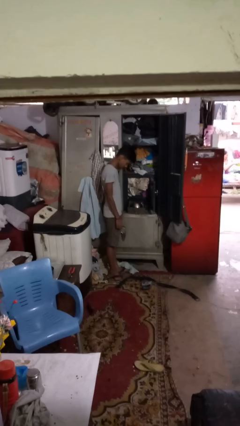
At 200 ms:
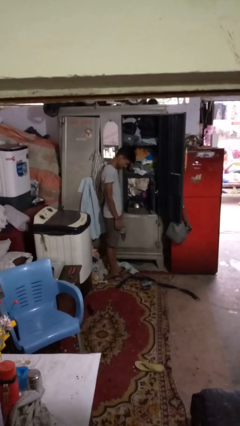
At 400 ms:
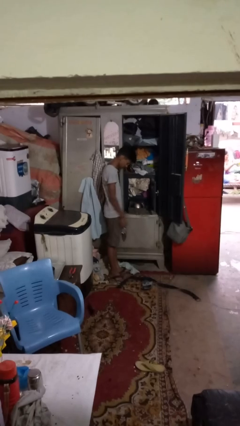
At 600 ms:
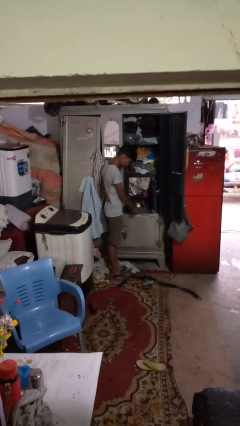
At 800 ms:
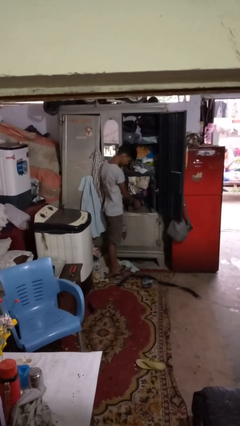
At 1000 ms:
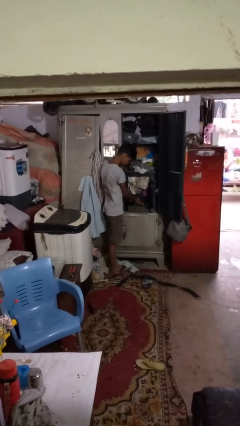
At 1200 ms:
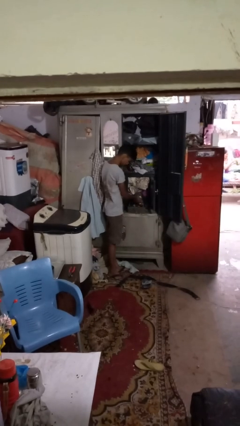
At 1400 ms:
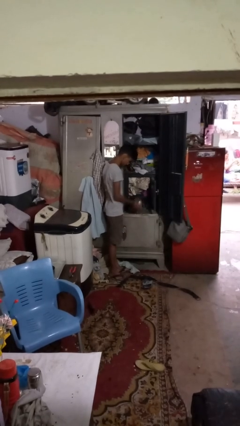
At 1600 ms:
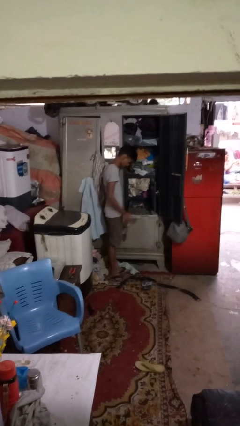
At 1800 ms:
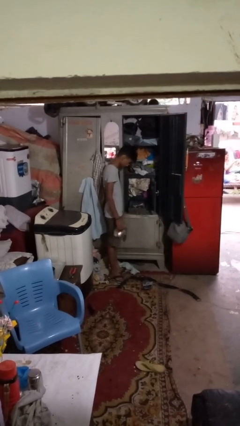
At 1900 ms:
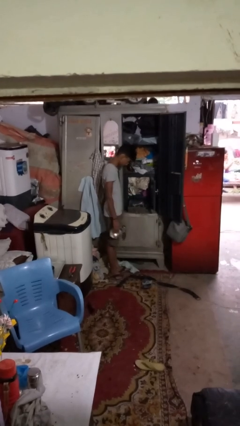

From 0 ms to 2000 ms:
person takes clothes from dresser

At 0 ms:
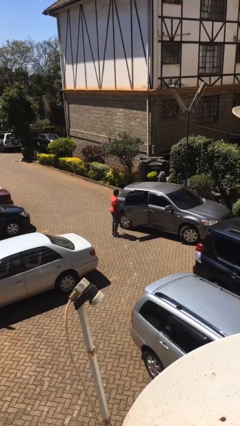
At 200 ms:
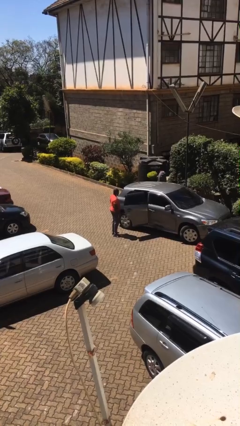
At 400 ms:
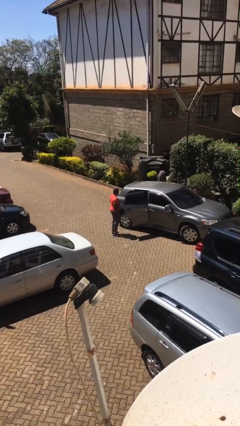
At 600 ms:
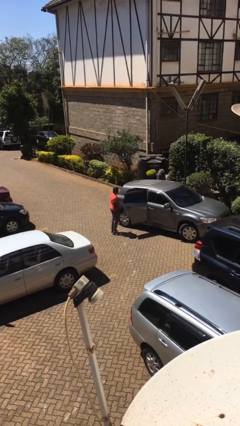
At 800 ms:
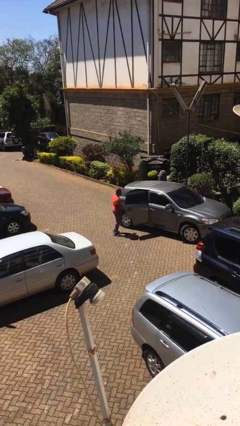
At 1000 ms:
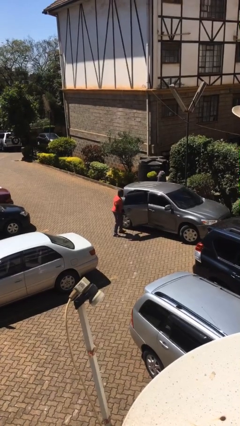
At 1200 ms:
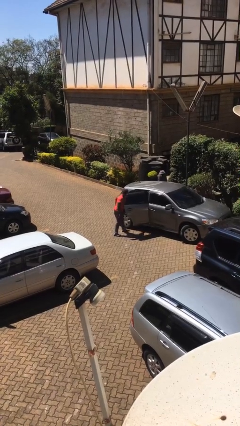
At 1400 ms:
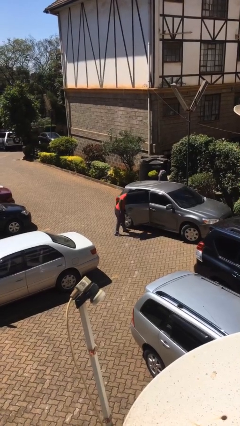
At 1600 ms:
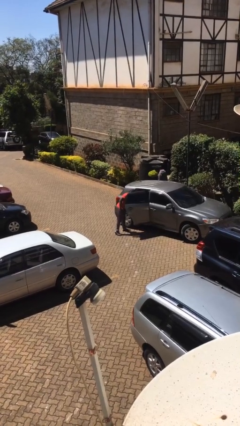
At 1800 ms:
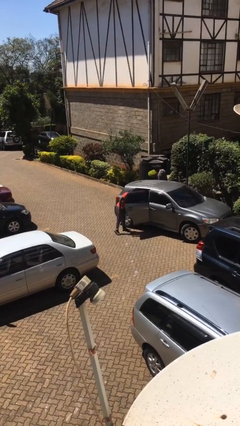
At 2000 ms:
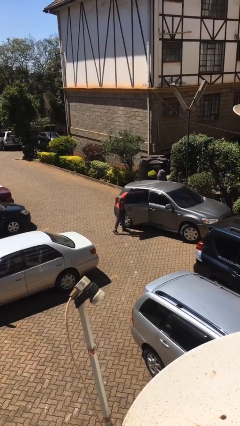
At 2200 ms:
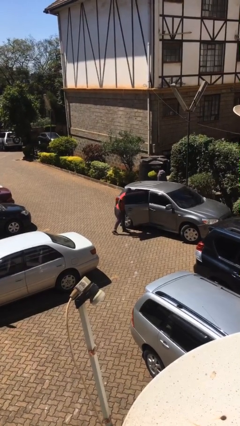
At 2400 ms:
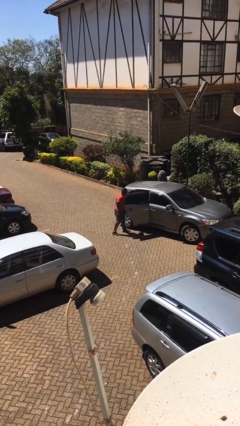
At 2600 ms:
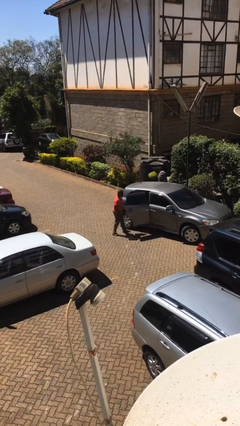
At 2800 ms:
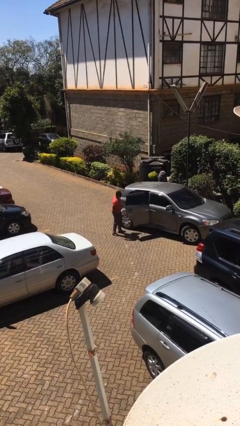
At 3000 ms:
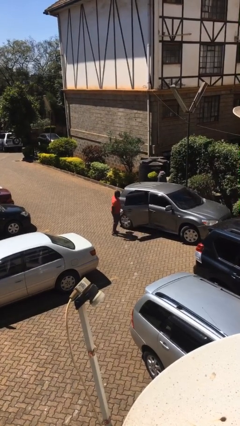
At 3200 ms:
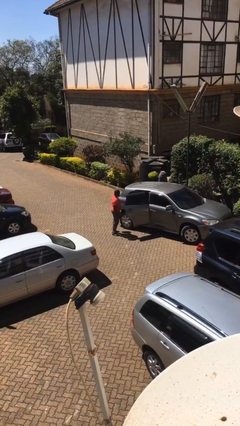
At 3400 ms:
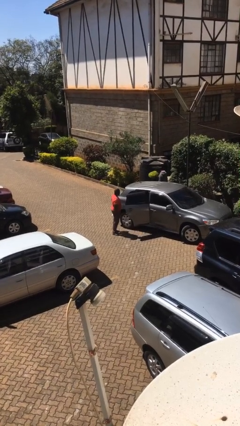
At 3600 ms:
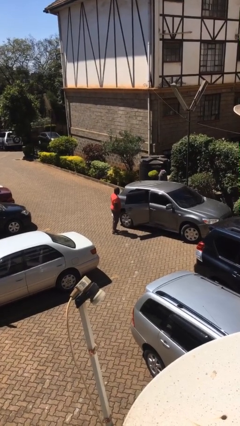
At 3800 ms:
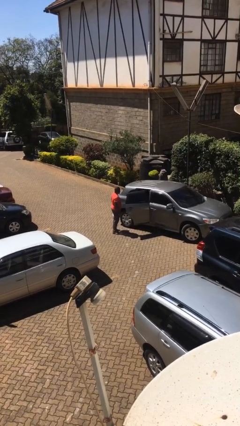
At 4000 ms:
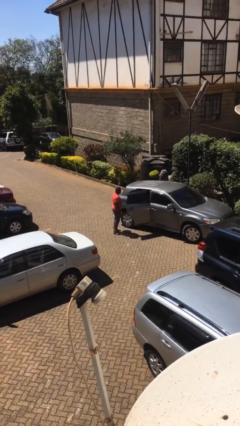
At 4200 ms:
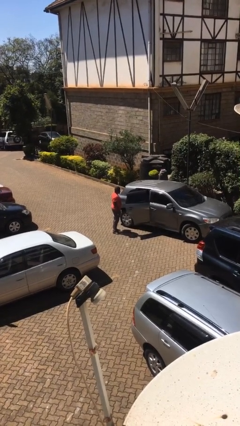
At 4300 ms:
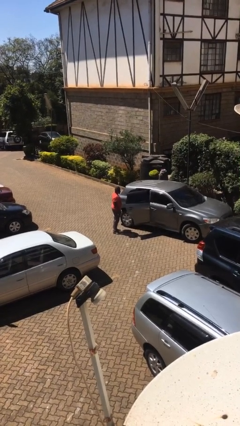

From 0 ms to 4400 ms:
person unloads car

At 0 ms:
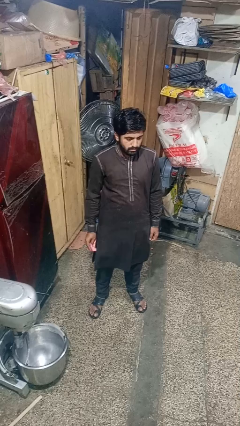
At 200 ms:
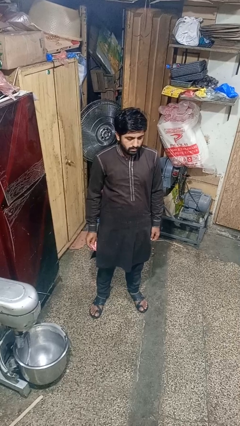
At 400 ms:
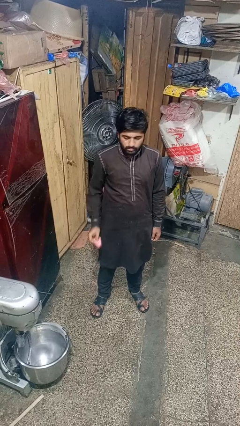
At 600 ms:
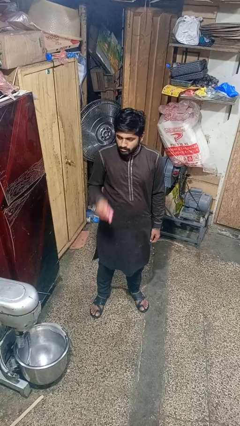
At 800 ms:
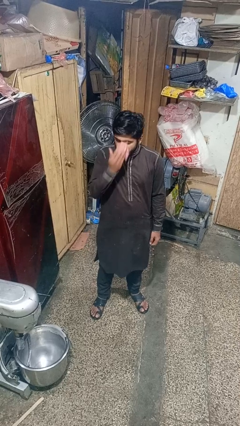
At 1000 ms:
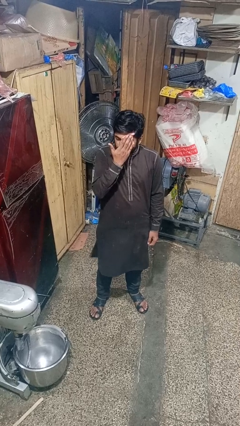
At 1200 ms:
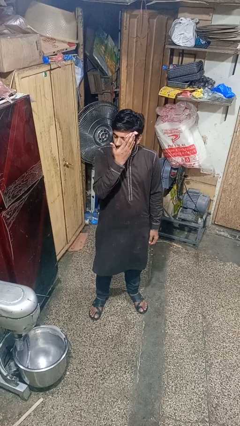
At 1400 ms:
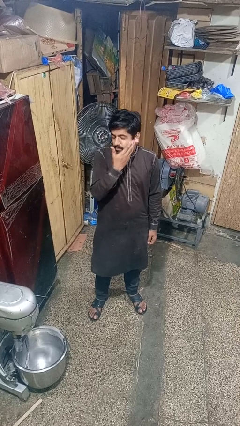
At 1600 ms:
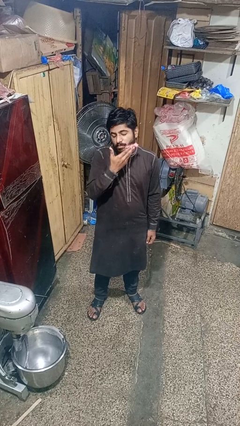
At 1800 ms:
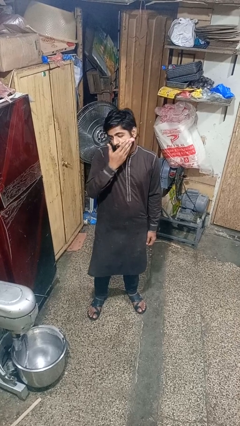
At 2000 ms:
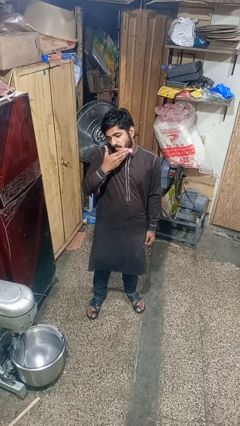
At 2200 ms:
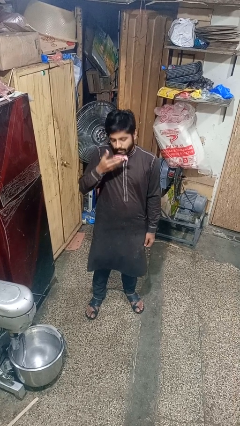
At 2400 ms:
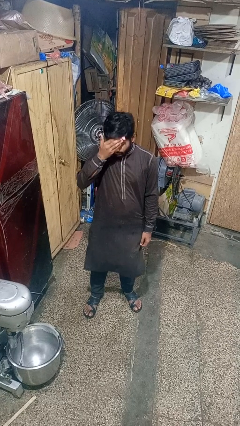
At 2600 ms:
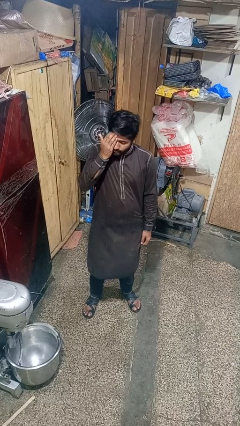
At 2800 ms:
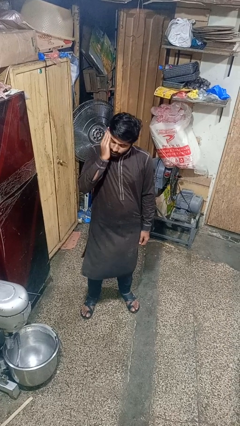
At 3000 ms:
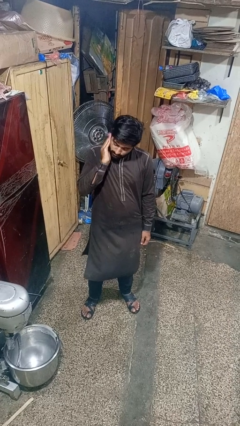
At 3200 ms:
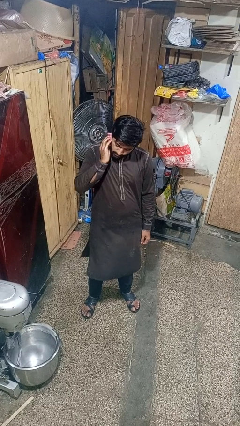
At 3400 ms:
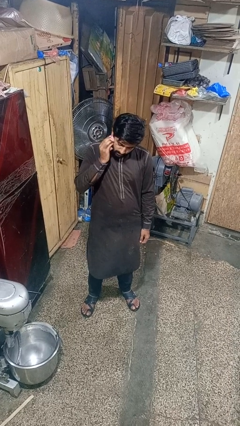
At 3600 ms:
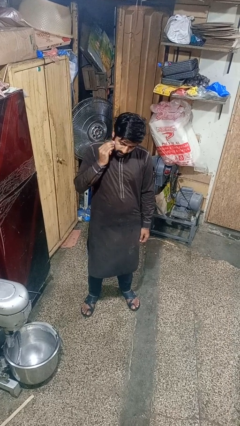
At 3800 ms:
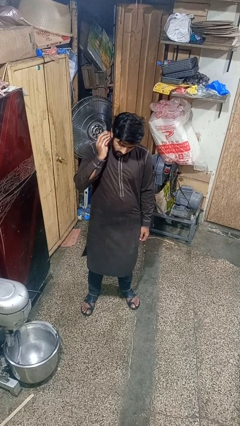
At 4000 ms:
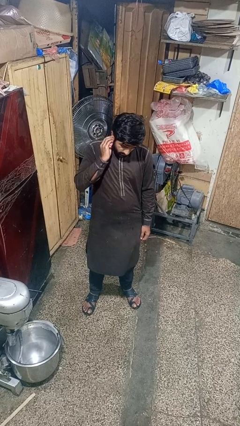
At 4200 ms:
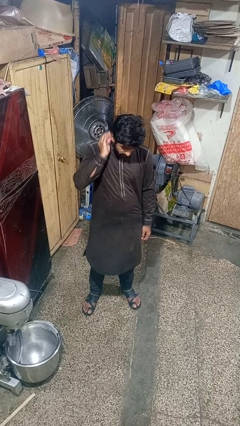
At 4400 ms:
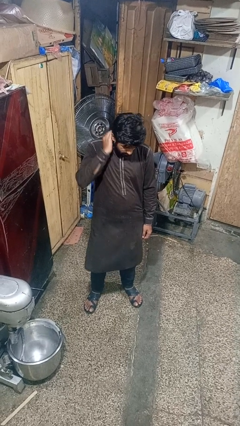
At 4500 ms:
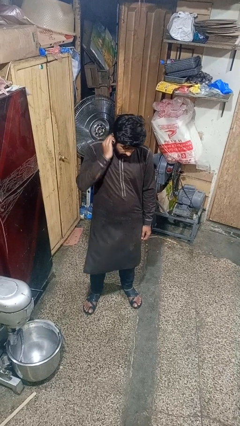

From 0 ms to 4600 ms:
person wipes mouth with napkin

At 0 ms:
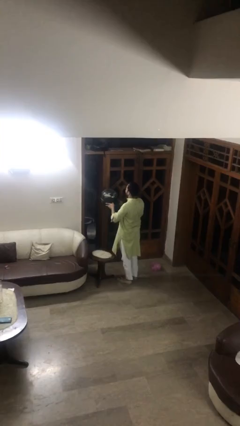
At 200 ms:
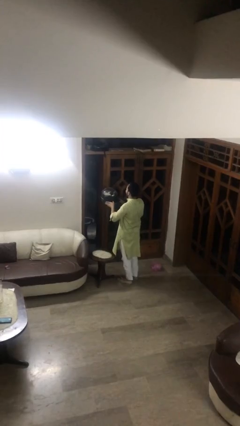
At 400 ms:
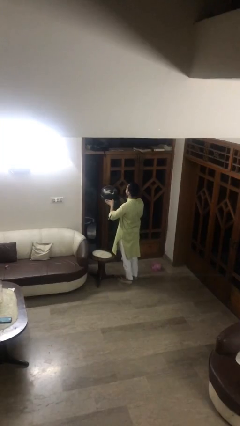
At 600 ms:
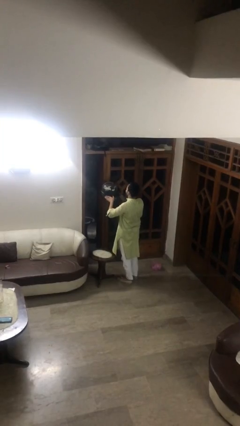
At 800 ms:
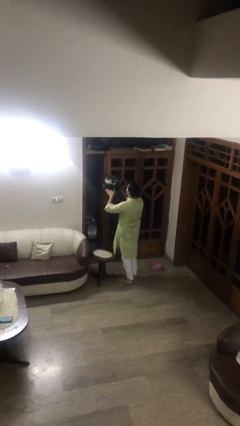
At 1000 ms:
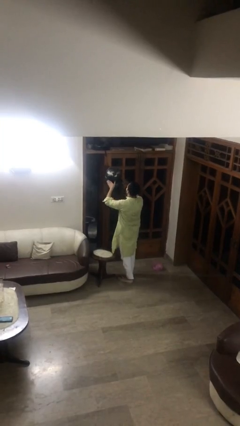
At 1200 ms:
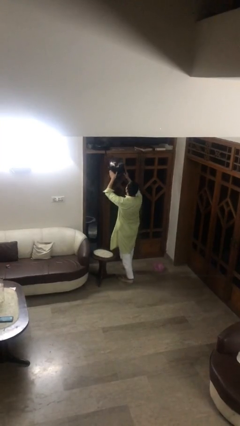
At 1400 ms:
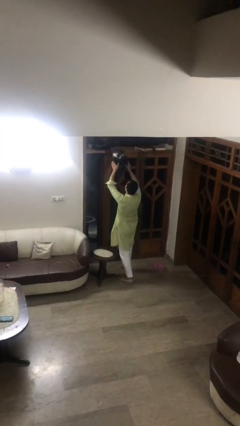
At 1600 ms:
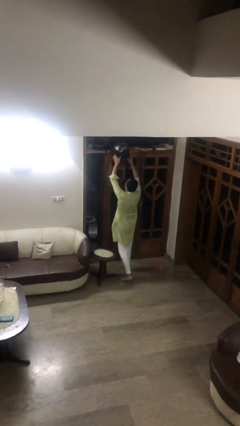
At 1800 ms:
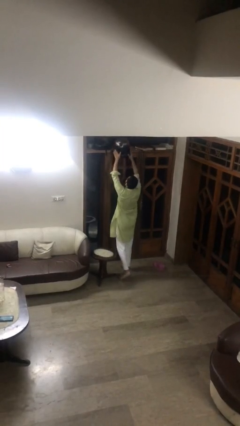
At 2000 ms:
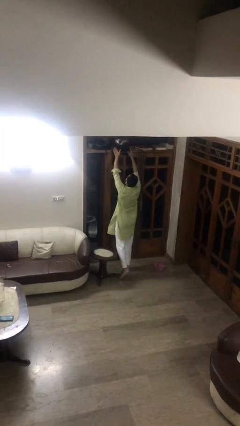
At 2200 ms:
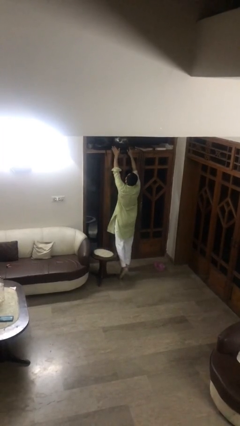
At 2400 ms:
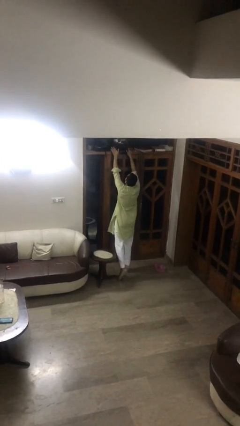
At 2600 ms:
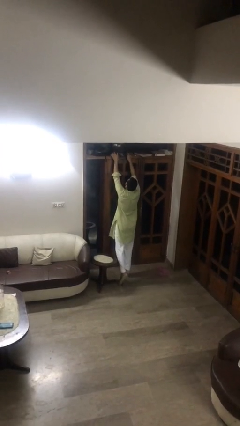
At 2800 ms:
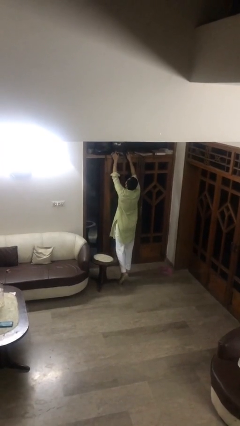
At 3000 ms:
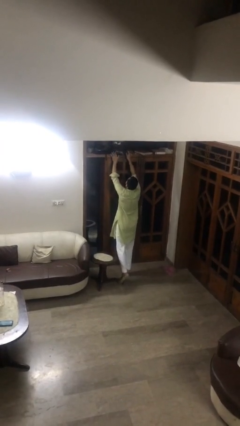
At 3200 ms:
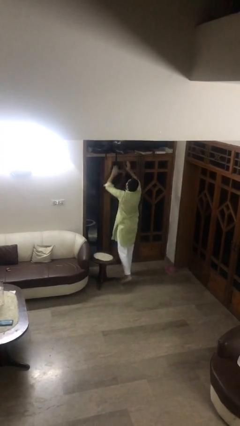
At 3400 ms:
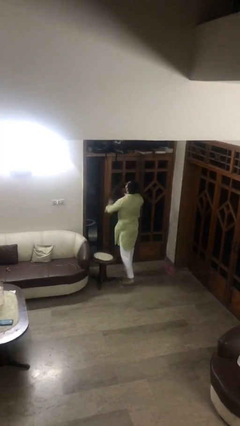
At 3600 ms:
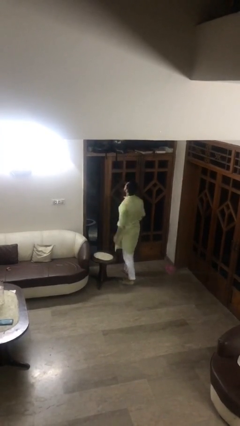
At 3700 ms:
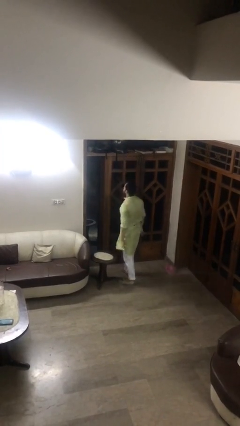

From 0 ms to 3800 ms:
person puts down object on shelf

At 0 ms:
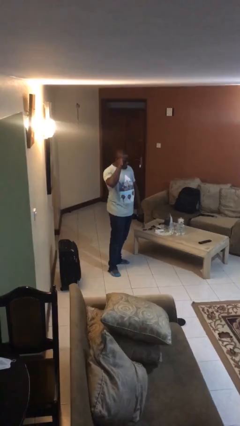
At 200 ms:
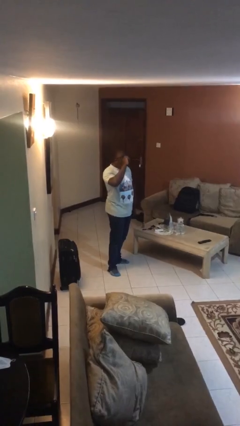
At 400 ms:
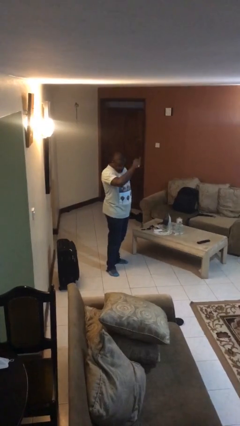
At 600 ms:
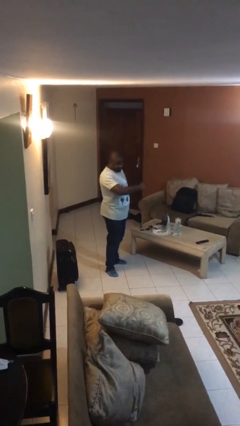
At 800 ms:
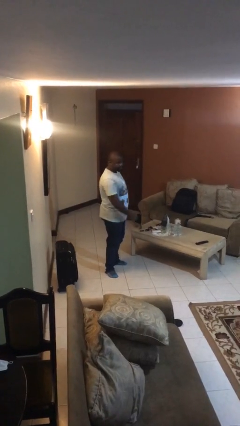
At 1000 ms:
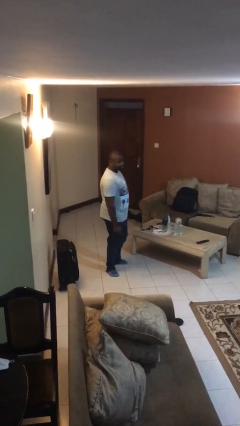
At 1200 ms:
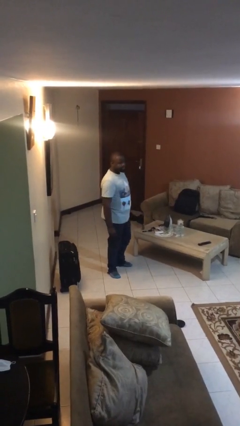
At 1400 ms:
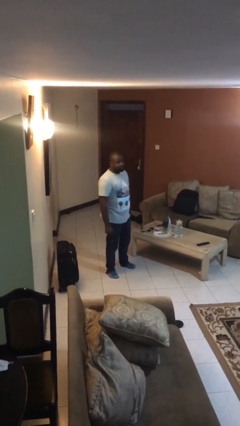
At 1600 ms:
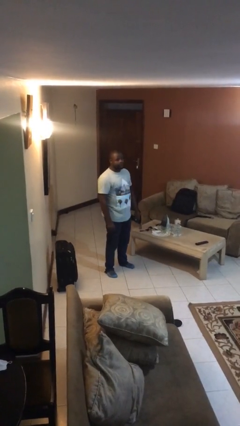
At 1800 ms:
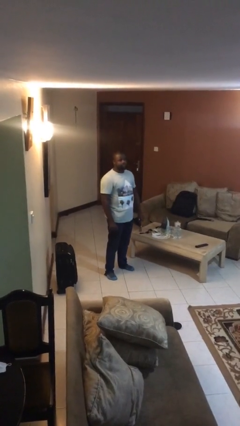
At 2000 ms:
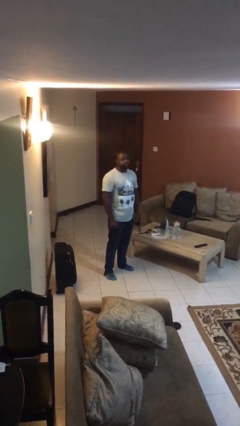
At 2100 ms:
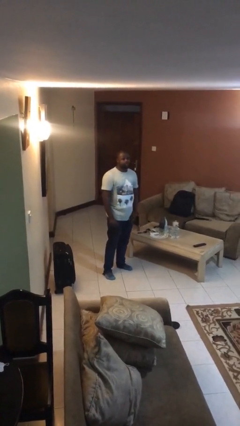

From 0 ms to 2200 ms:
person takes off sunglasses
